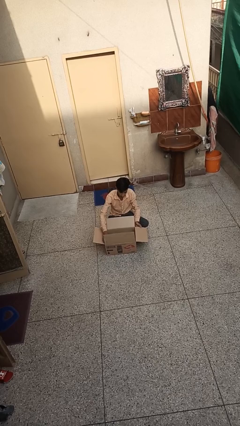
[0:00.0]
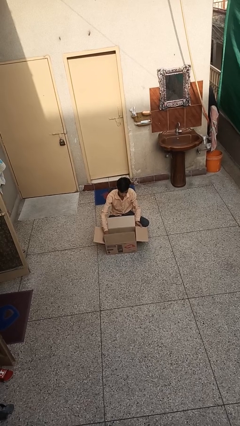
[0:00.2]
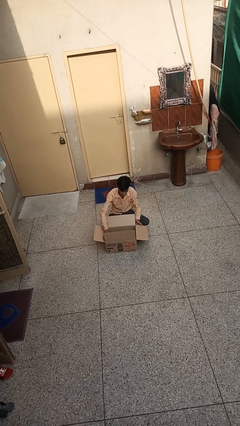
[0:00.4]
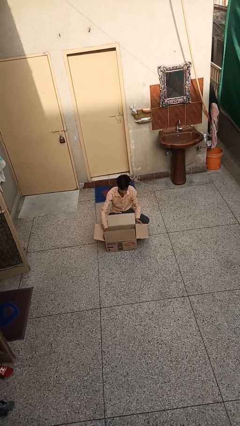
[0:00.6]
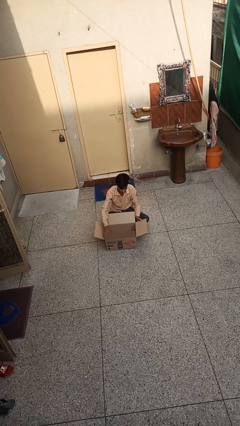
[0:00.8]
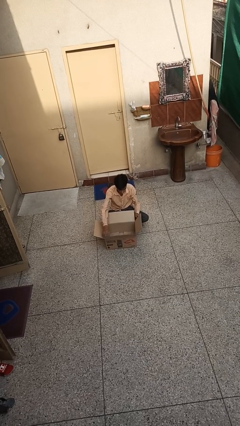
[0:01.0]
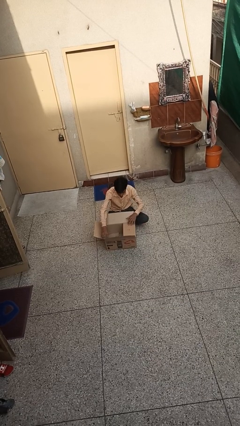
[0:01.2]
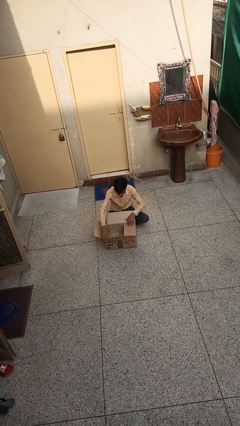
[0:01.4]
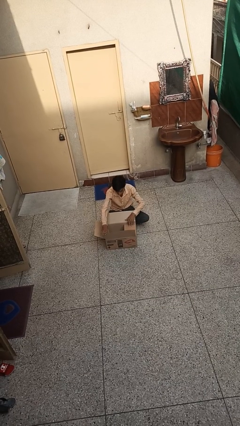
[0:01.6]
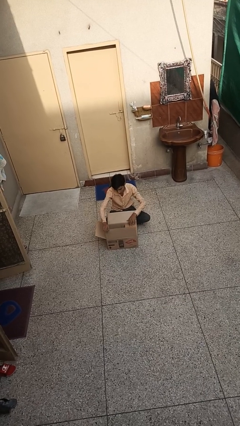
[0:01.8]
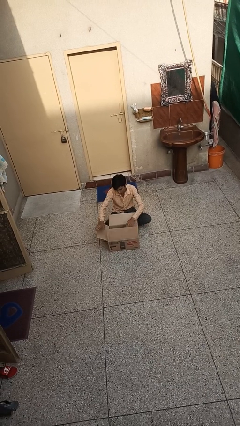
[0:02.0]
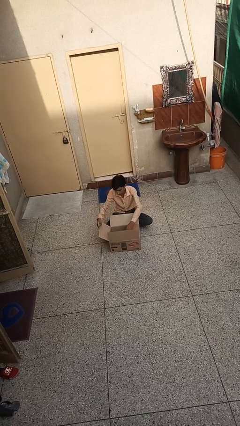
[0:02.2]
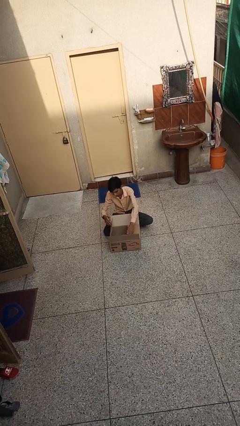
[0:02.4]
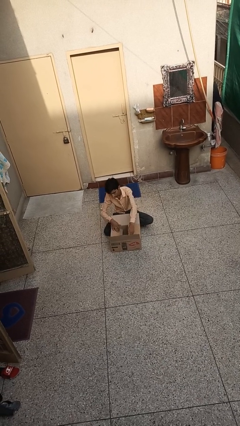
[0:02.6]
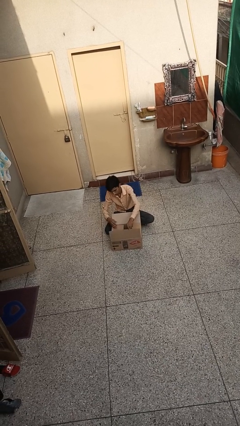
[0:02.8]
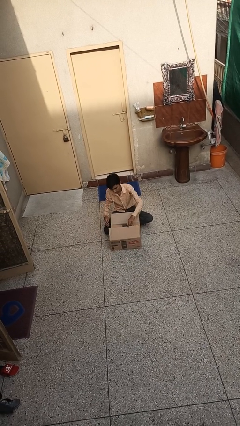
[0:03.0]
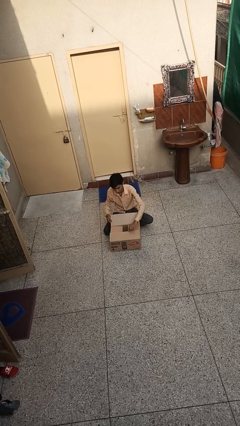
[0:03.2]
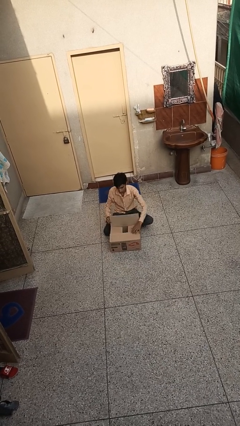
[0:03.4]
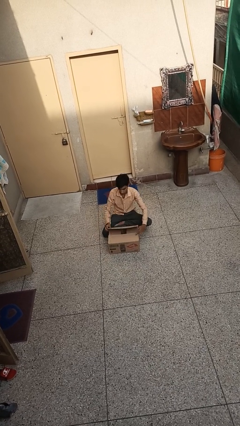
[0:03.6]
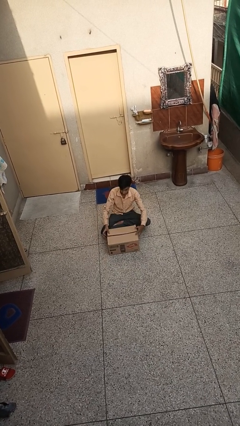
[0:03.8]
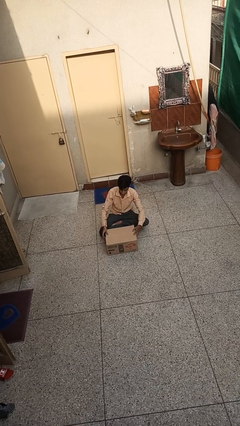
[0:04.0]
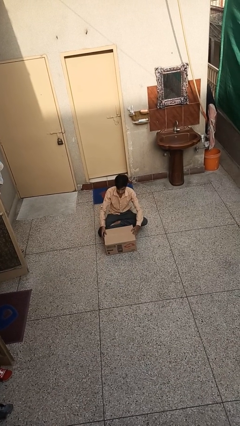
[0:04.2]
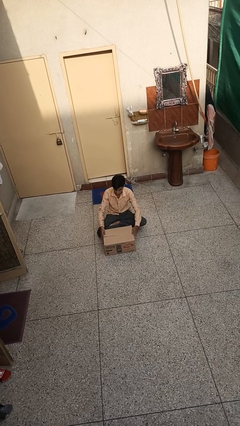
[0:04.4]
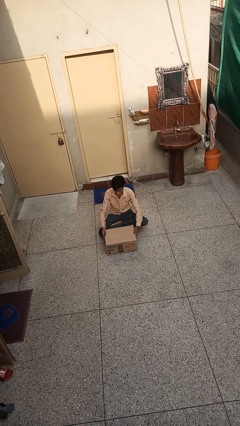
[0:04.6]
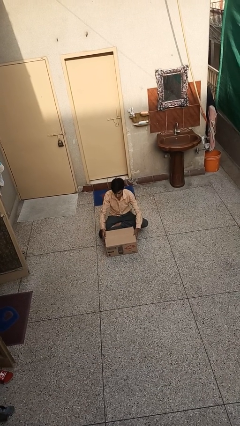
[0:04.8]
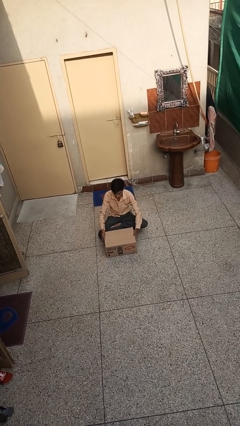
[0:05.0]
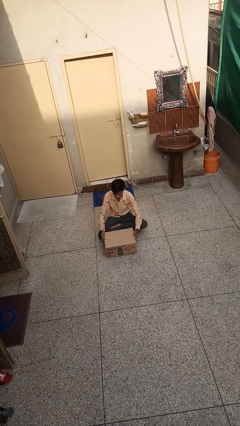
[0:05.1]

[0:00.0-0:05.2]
person closes box

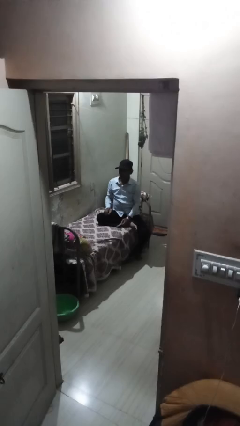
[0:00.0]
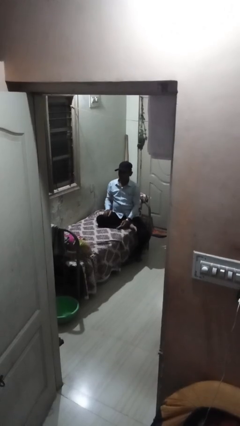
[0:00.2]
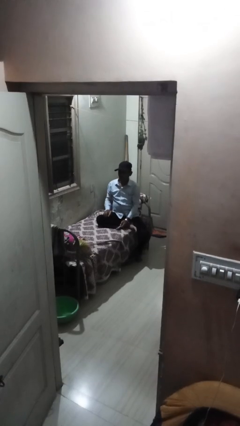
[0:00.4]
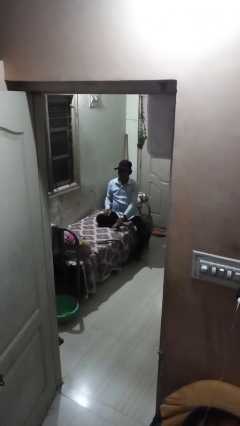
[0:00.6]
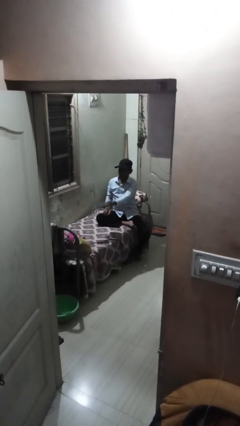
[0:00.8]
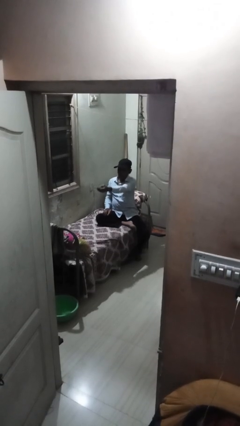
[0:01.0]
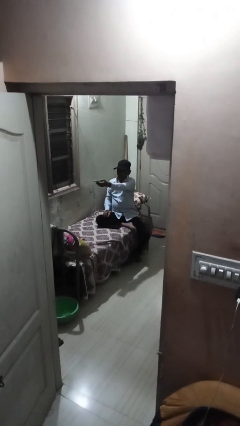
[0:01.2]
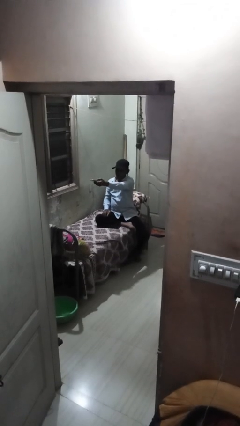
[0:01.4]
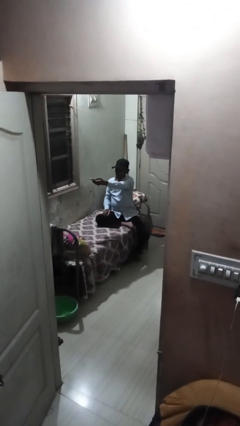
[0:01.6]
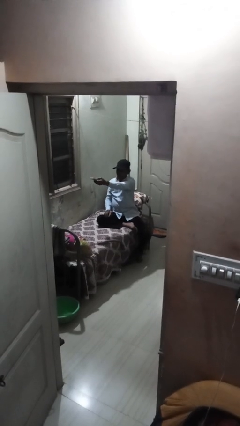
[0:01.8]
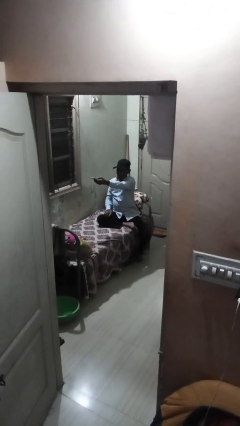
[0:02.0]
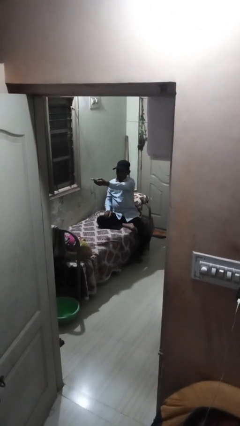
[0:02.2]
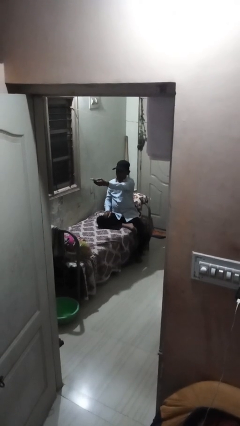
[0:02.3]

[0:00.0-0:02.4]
person uses television remote

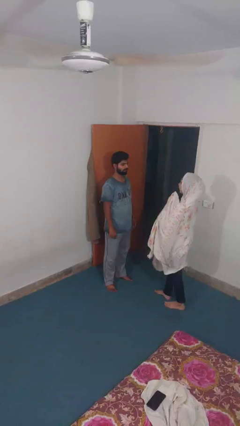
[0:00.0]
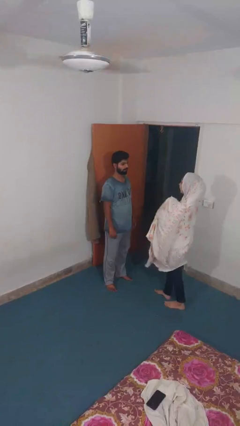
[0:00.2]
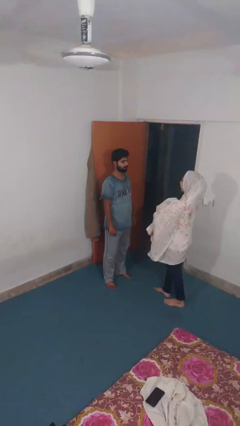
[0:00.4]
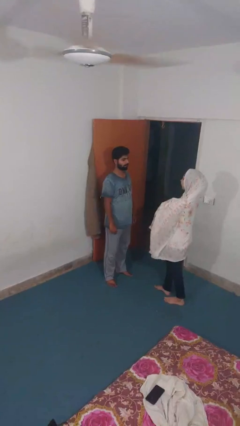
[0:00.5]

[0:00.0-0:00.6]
person grabs person by hair

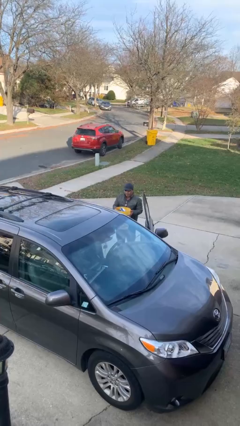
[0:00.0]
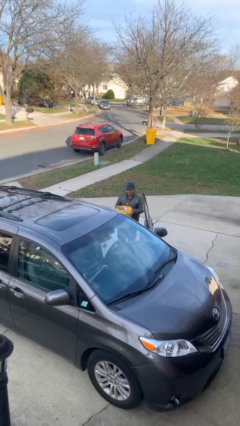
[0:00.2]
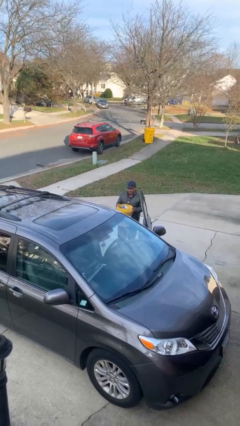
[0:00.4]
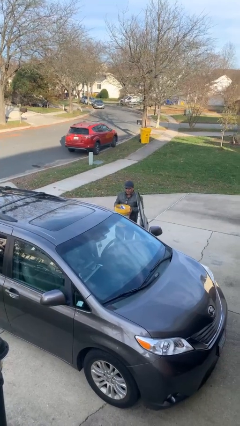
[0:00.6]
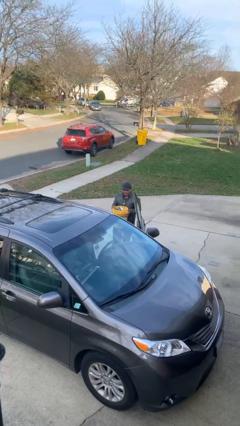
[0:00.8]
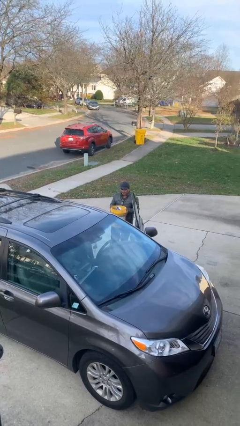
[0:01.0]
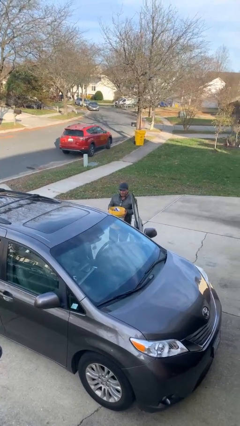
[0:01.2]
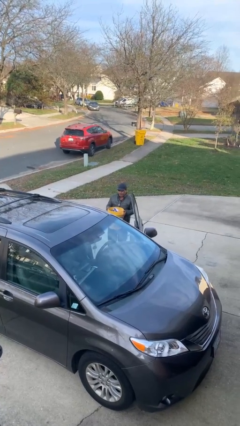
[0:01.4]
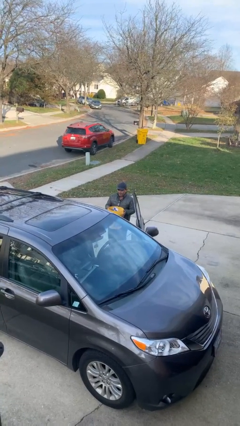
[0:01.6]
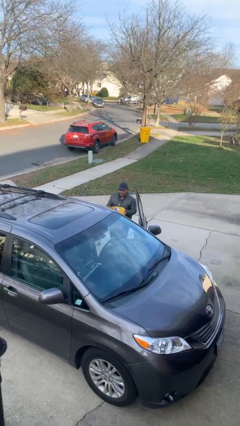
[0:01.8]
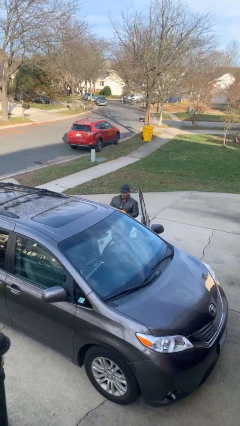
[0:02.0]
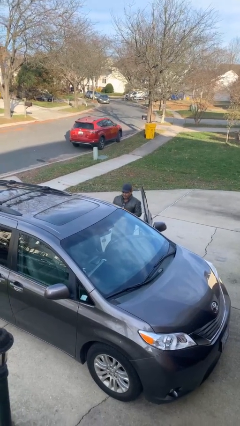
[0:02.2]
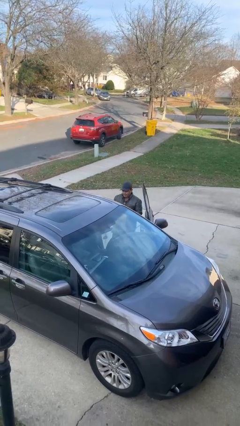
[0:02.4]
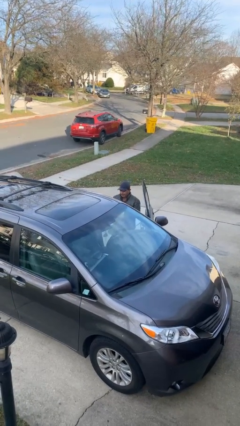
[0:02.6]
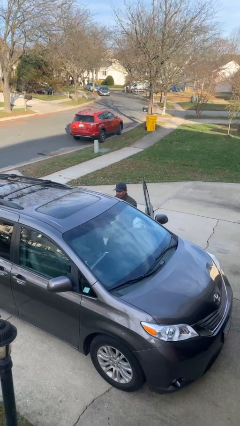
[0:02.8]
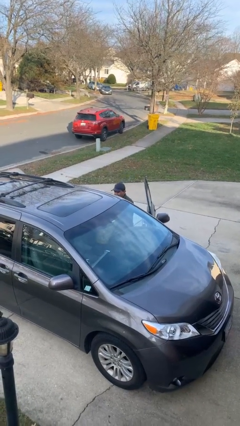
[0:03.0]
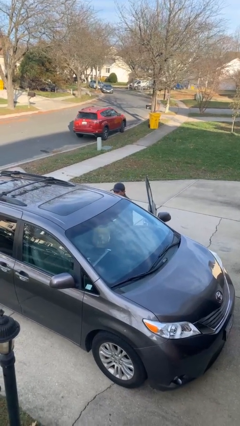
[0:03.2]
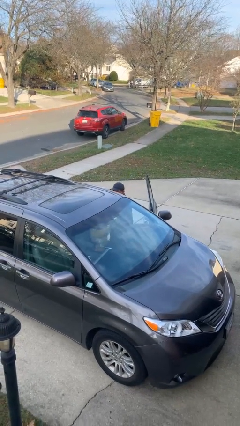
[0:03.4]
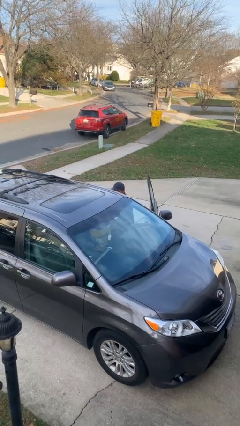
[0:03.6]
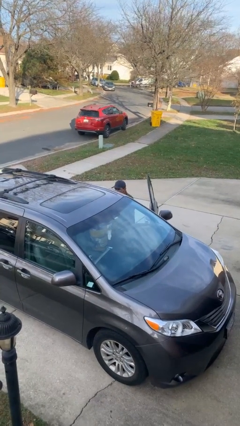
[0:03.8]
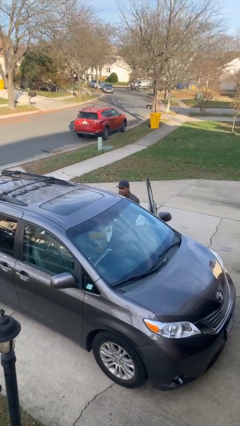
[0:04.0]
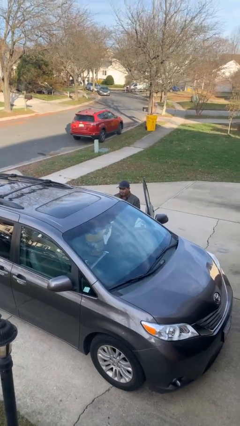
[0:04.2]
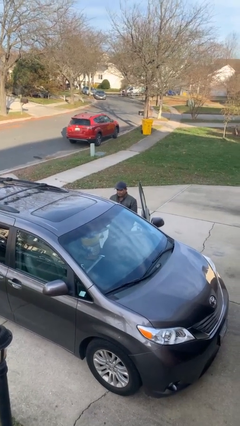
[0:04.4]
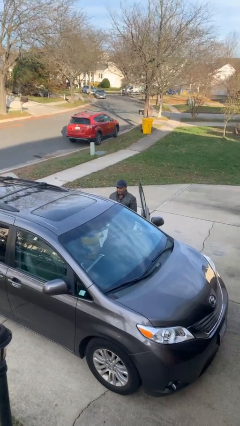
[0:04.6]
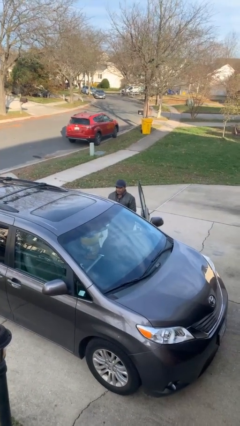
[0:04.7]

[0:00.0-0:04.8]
person loads car

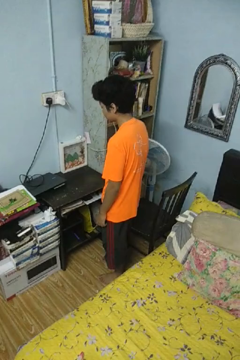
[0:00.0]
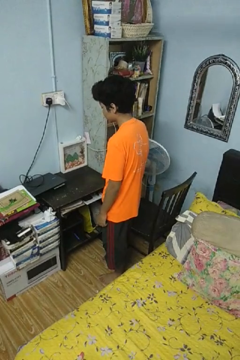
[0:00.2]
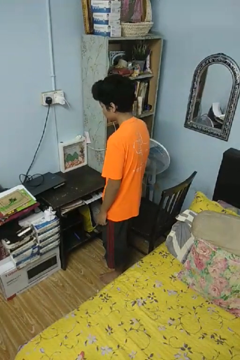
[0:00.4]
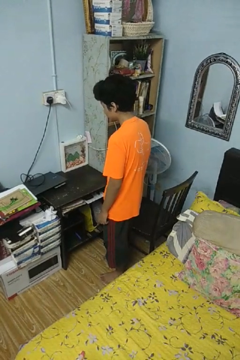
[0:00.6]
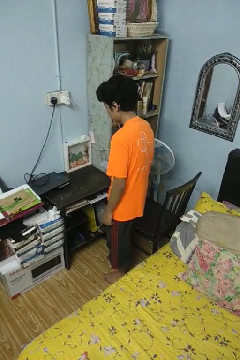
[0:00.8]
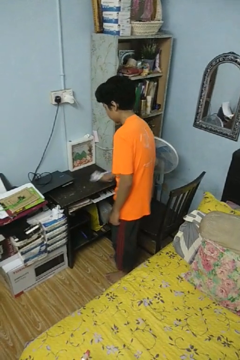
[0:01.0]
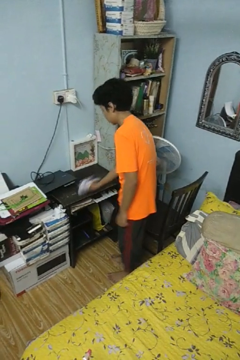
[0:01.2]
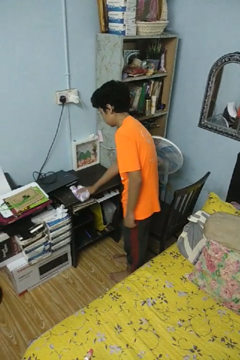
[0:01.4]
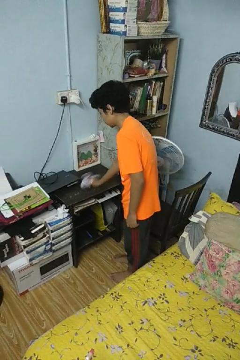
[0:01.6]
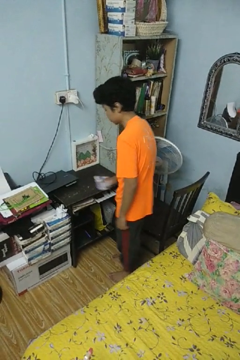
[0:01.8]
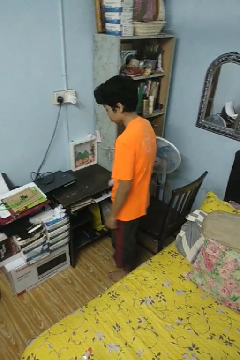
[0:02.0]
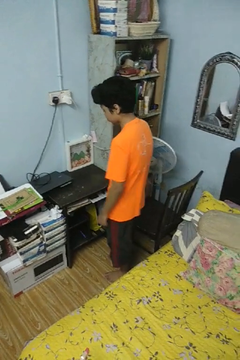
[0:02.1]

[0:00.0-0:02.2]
person cleans table with rag

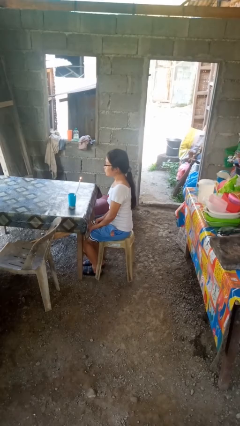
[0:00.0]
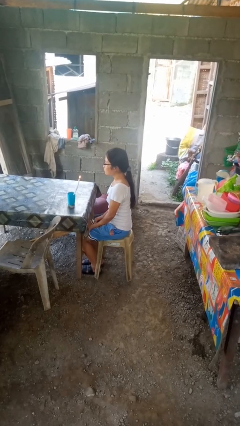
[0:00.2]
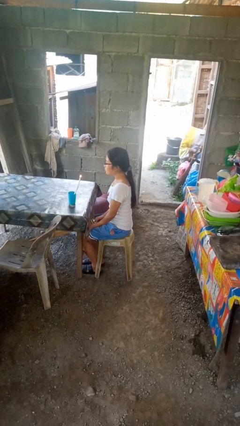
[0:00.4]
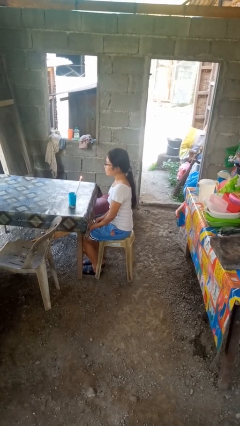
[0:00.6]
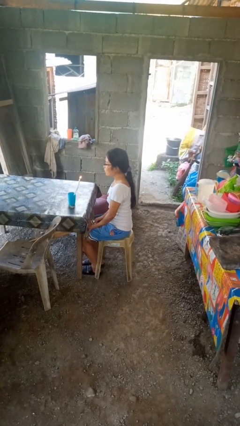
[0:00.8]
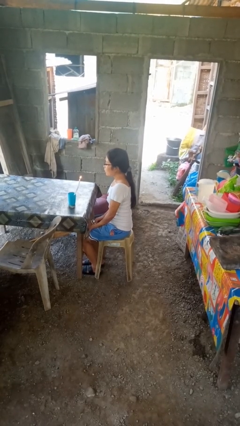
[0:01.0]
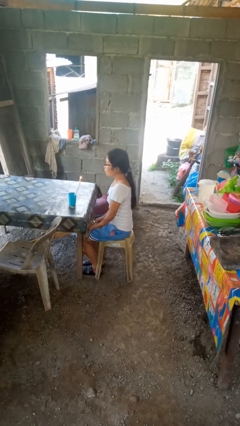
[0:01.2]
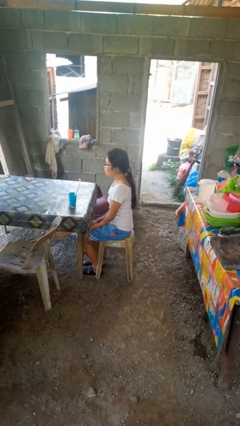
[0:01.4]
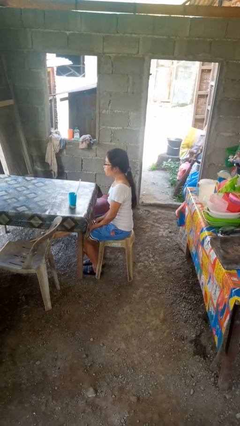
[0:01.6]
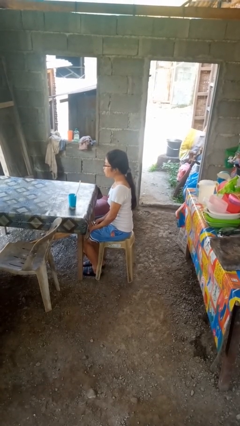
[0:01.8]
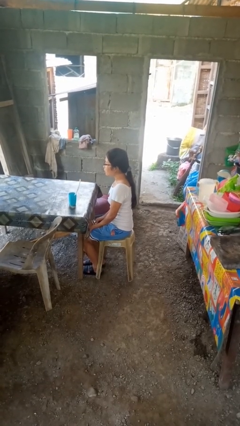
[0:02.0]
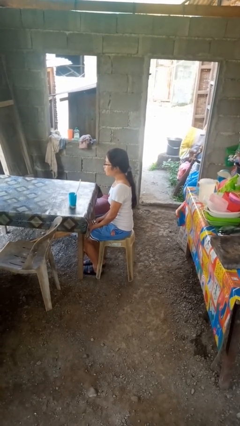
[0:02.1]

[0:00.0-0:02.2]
person extinguishes candle

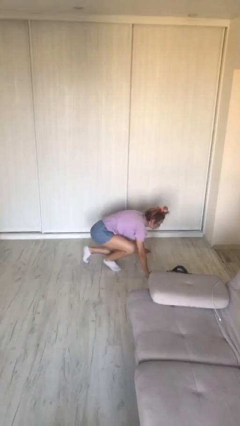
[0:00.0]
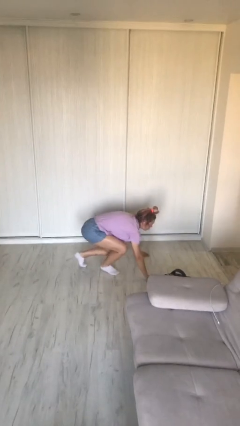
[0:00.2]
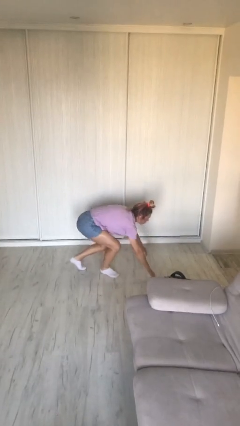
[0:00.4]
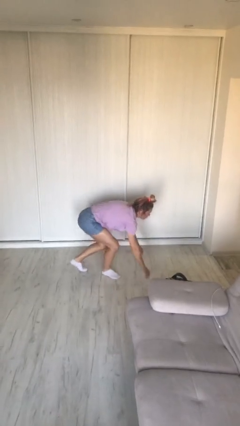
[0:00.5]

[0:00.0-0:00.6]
person stands up from floor
